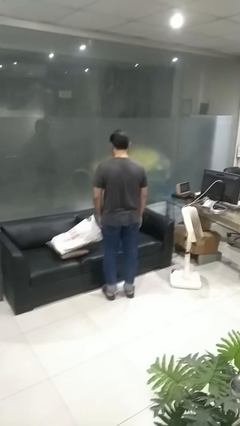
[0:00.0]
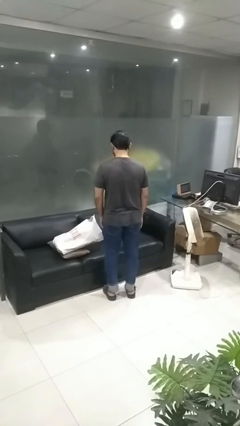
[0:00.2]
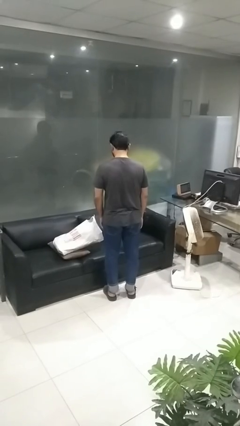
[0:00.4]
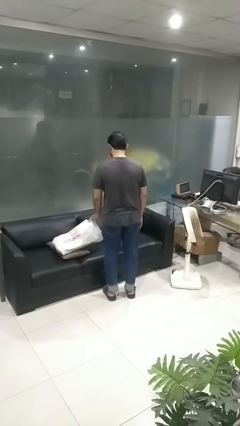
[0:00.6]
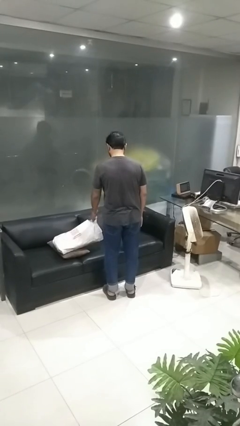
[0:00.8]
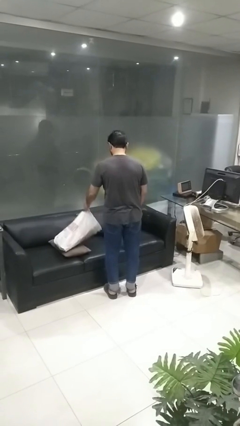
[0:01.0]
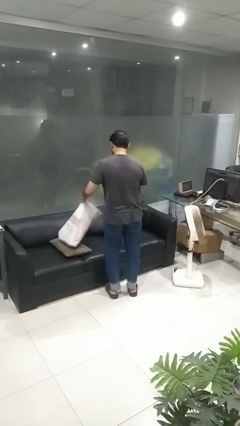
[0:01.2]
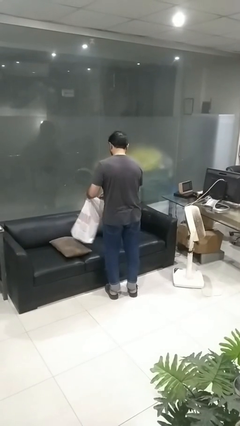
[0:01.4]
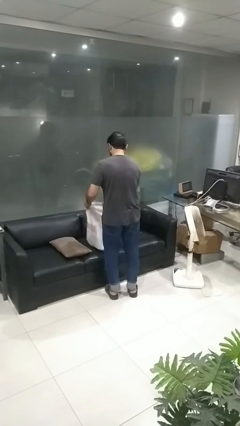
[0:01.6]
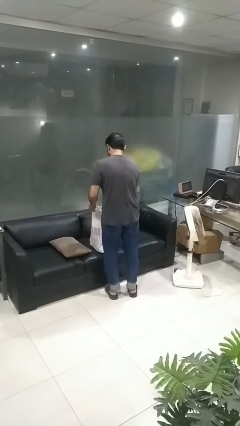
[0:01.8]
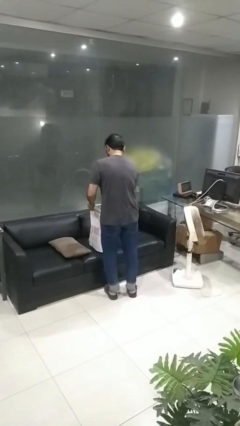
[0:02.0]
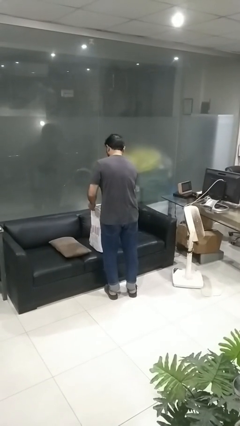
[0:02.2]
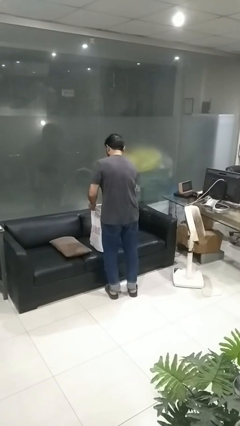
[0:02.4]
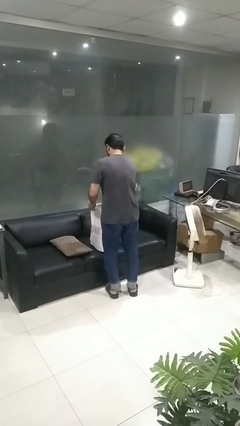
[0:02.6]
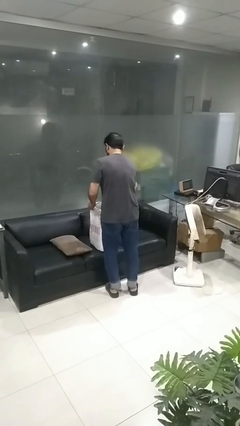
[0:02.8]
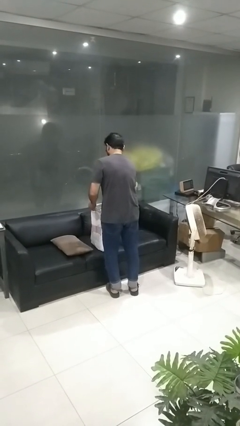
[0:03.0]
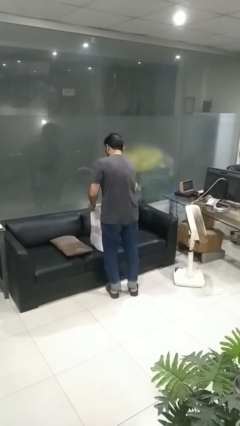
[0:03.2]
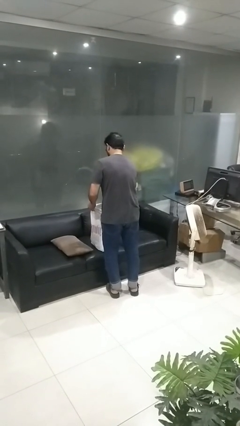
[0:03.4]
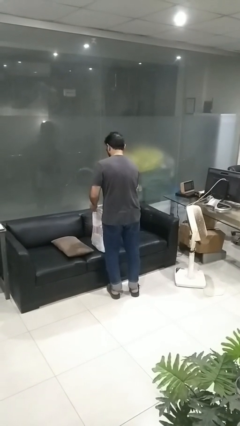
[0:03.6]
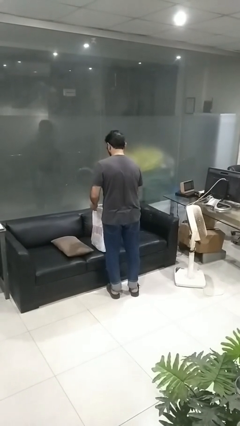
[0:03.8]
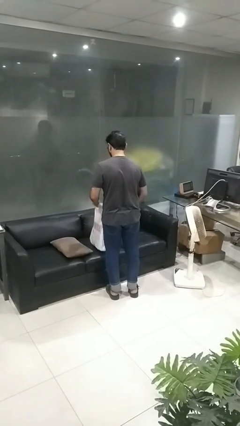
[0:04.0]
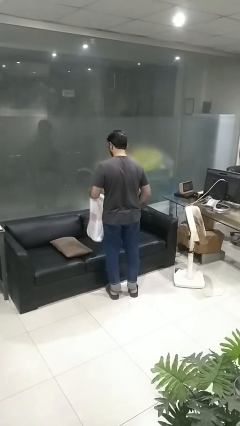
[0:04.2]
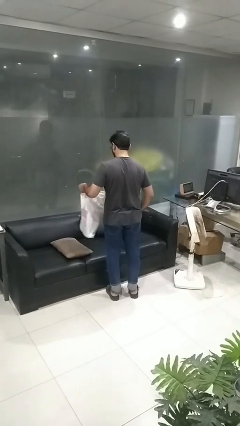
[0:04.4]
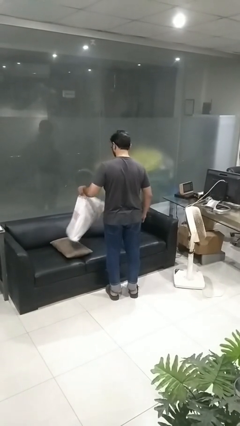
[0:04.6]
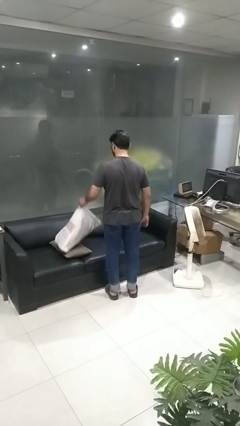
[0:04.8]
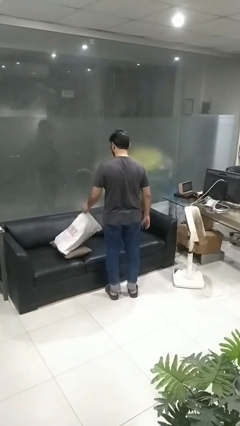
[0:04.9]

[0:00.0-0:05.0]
person searches in bag

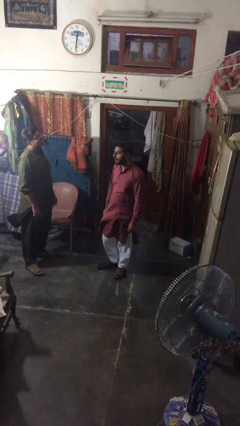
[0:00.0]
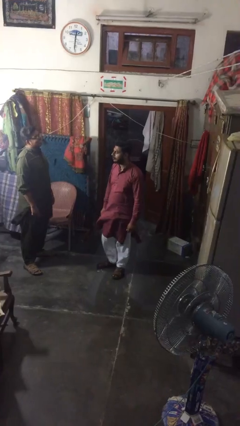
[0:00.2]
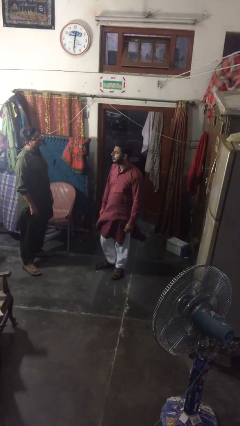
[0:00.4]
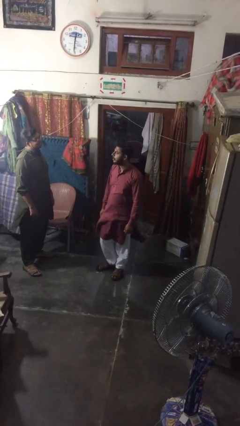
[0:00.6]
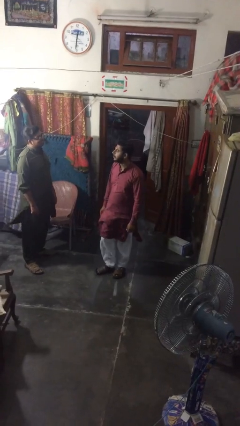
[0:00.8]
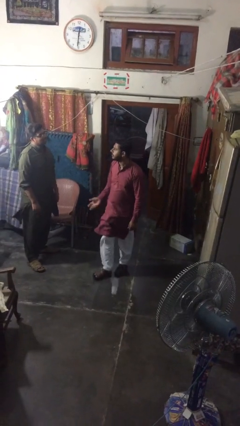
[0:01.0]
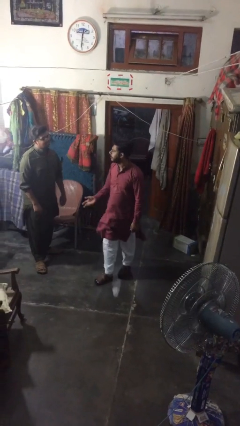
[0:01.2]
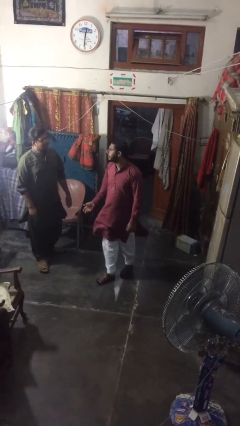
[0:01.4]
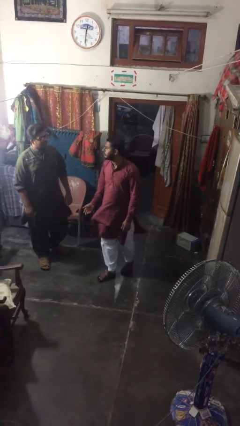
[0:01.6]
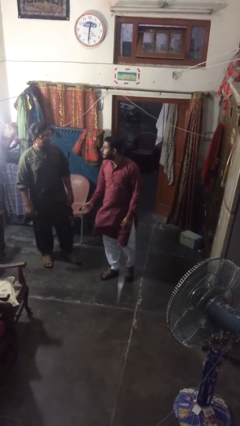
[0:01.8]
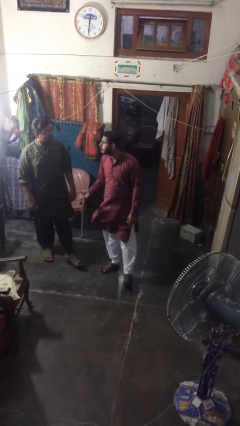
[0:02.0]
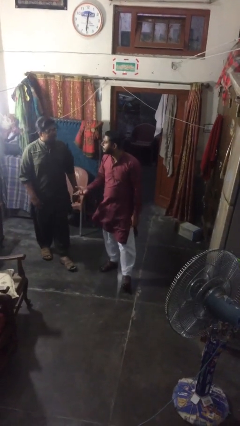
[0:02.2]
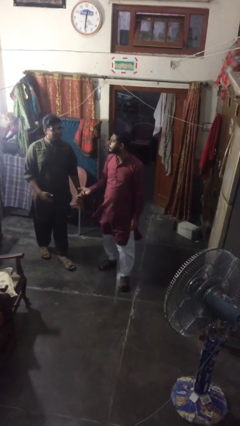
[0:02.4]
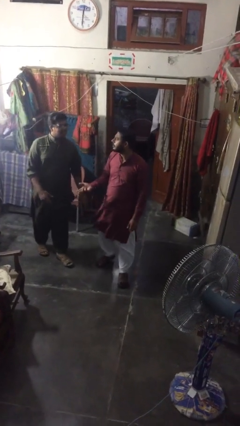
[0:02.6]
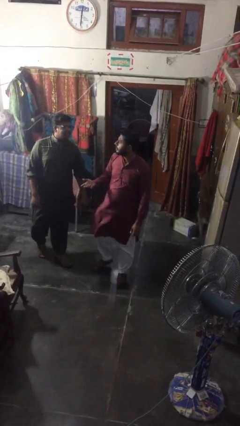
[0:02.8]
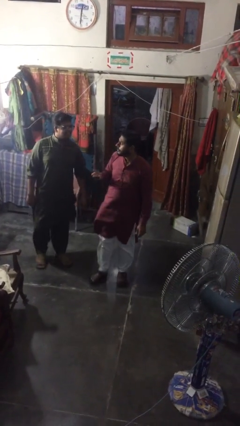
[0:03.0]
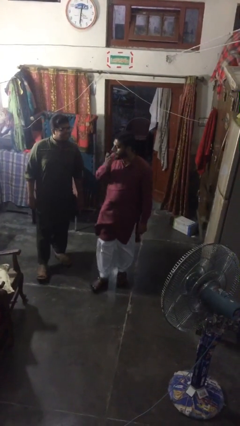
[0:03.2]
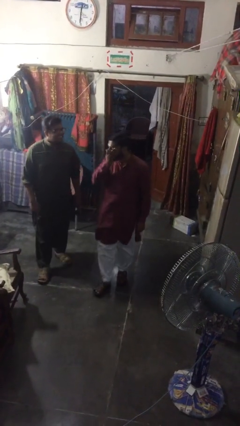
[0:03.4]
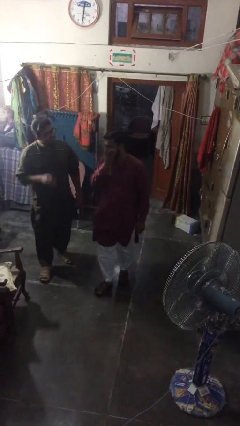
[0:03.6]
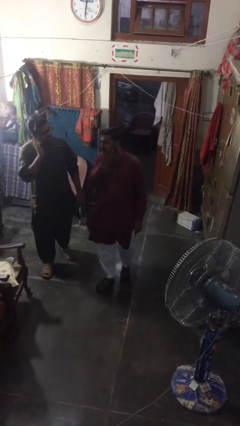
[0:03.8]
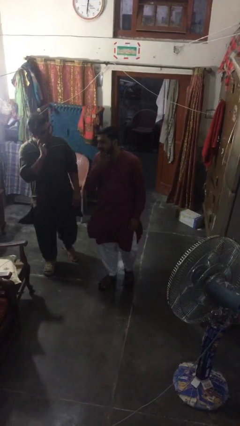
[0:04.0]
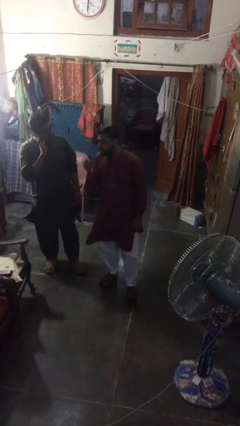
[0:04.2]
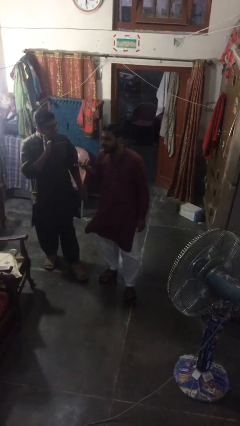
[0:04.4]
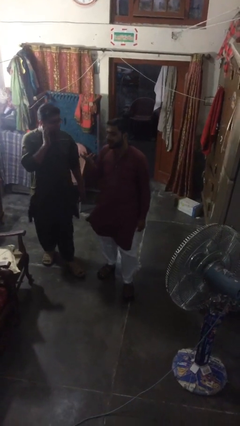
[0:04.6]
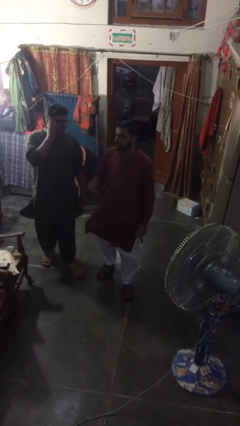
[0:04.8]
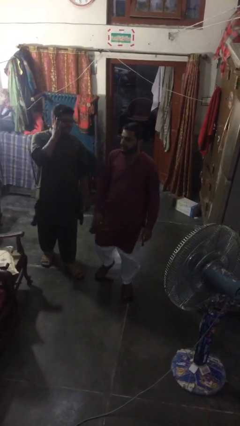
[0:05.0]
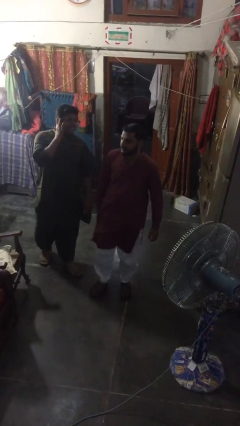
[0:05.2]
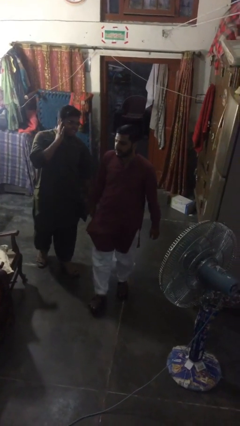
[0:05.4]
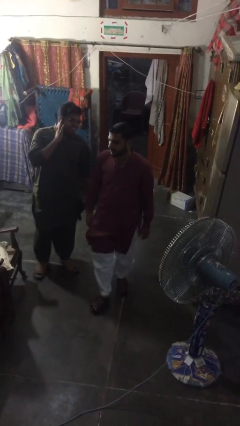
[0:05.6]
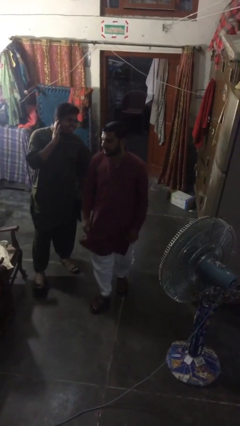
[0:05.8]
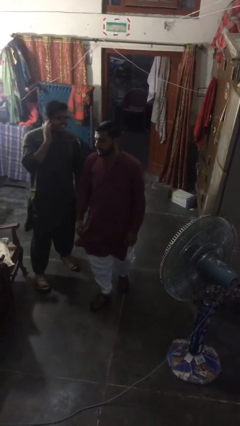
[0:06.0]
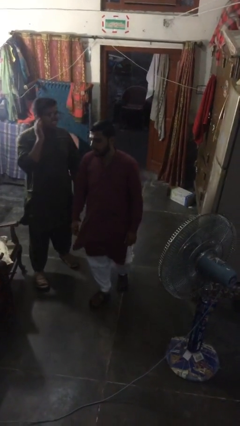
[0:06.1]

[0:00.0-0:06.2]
person talks to person

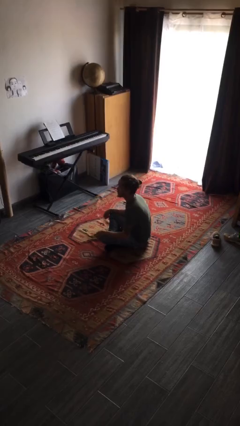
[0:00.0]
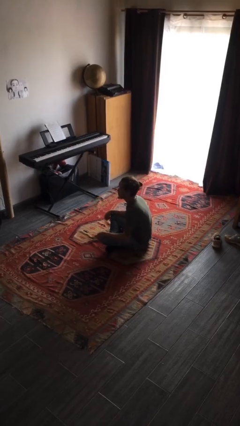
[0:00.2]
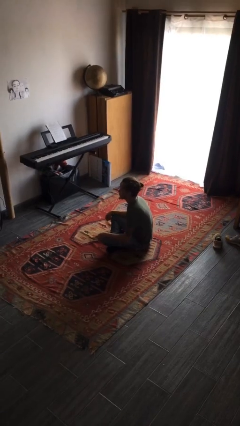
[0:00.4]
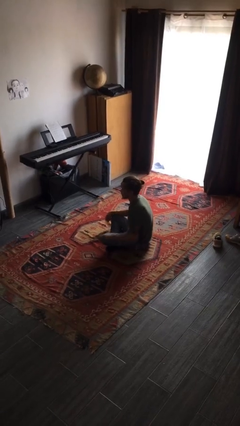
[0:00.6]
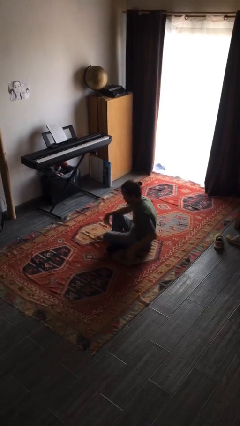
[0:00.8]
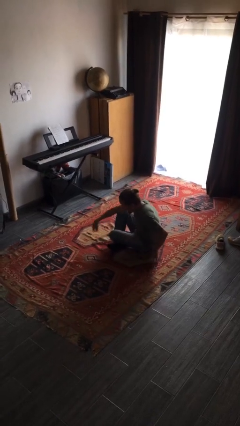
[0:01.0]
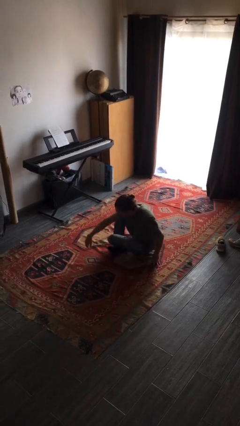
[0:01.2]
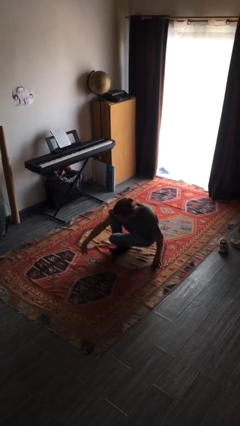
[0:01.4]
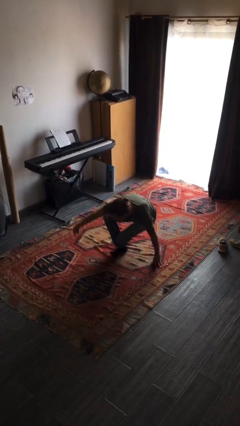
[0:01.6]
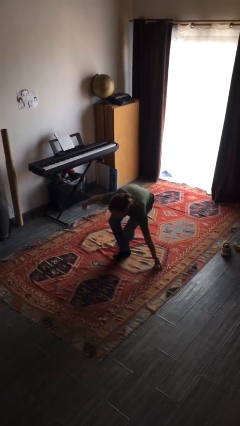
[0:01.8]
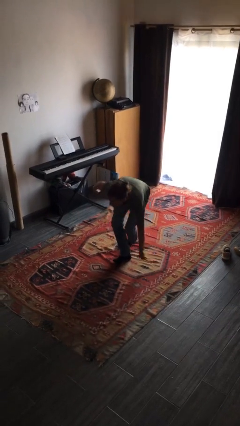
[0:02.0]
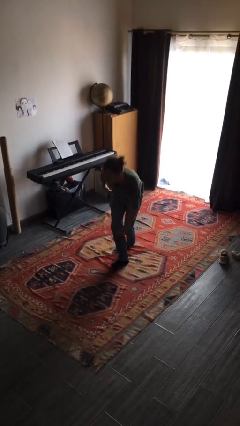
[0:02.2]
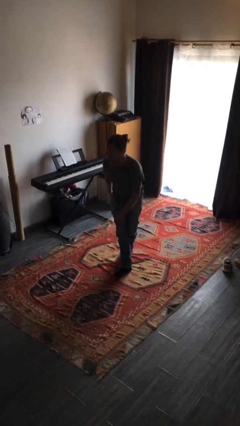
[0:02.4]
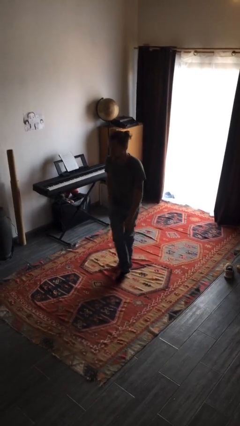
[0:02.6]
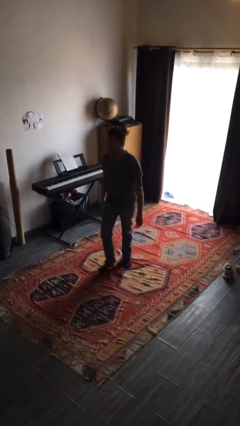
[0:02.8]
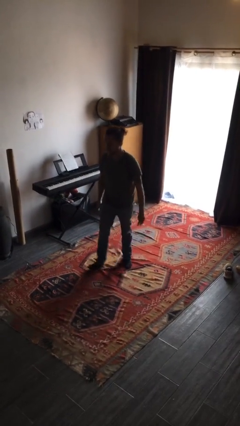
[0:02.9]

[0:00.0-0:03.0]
person stands up from floor

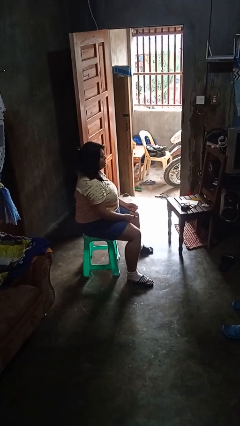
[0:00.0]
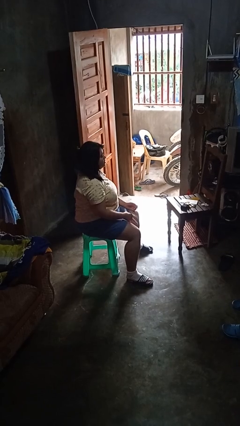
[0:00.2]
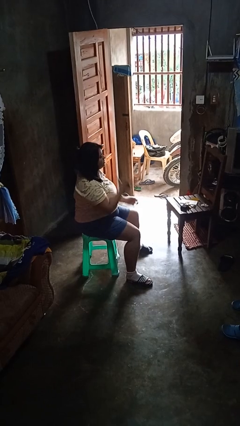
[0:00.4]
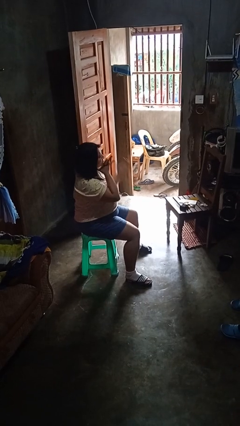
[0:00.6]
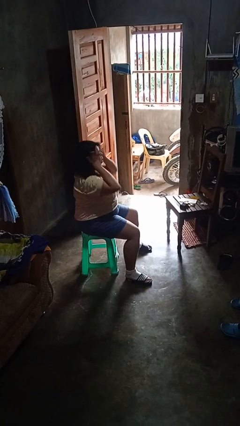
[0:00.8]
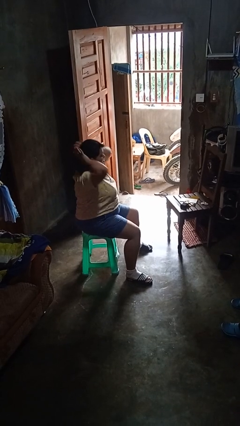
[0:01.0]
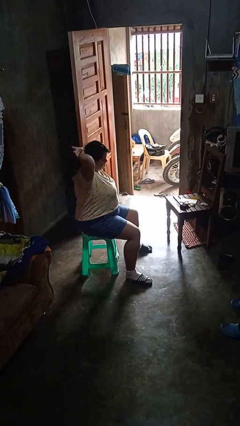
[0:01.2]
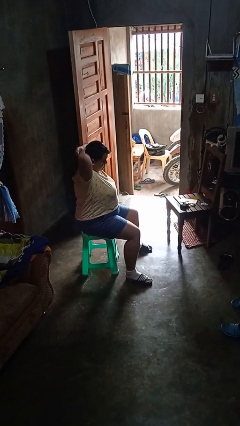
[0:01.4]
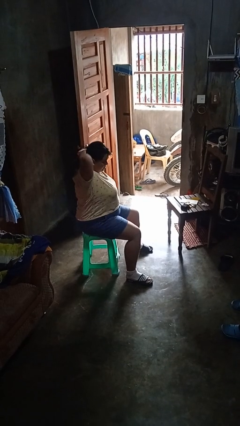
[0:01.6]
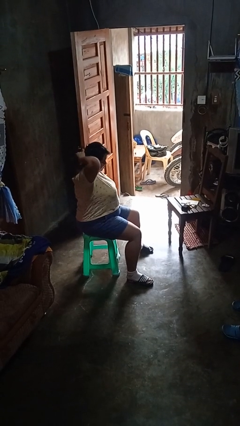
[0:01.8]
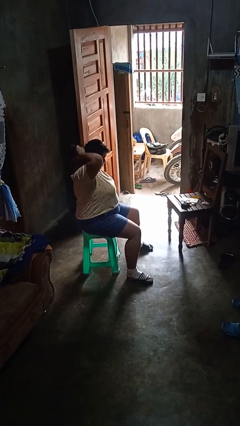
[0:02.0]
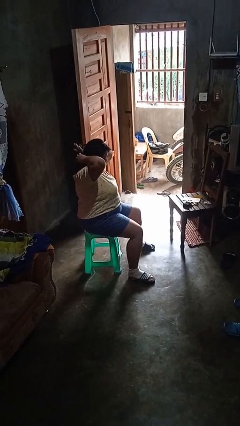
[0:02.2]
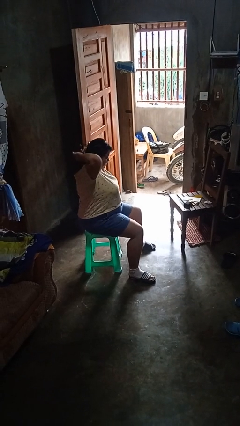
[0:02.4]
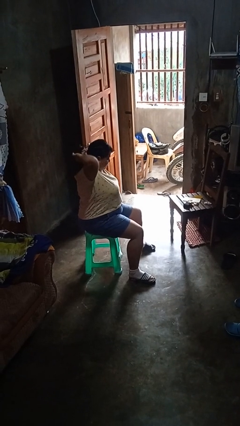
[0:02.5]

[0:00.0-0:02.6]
person puts hair in ponytail

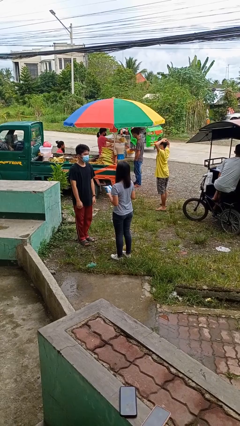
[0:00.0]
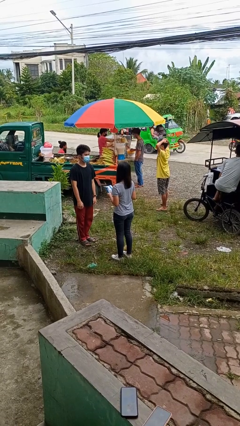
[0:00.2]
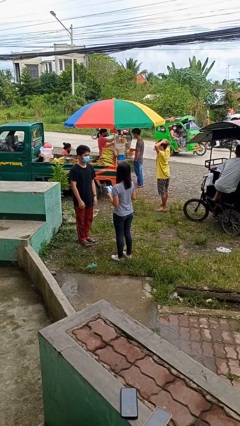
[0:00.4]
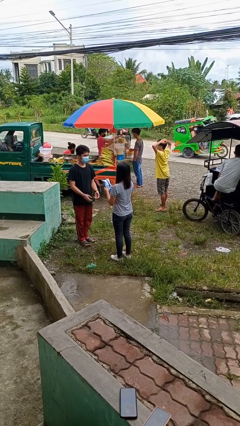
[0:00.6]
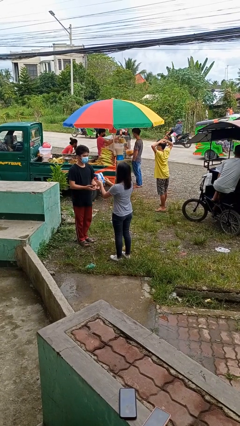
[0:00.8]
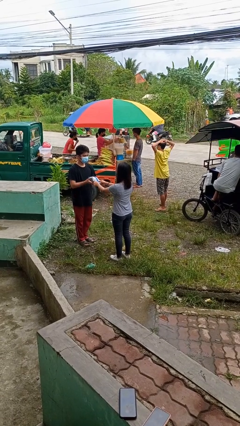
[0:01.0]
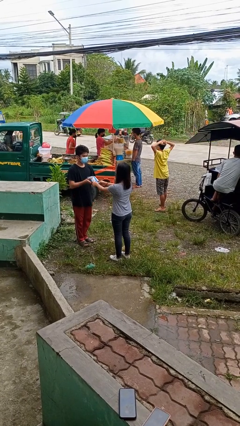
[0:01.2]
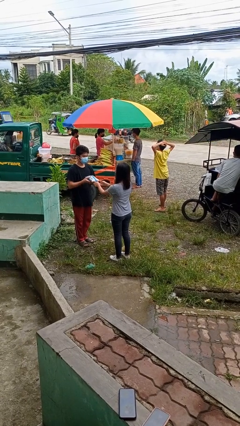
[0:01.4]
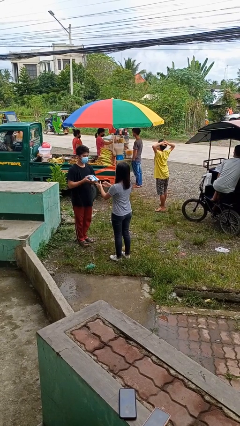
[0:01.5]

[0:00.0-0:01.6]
person transfers object to person
